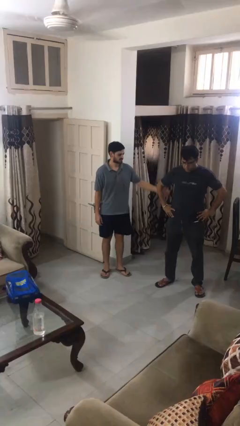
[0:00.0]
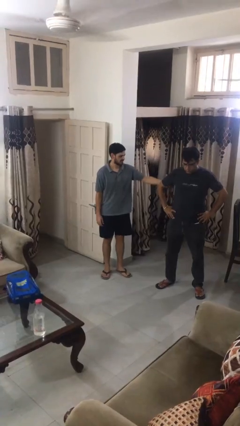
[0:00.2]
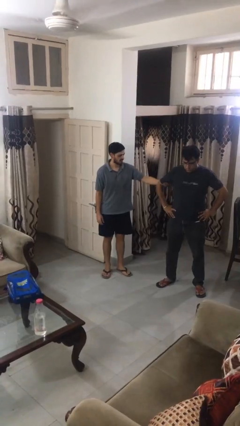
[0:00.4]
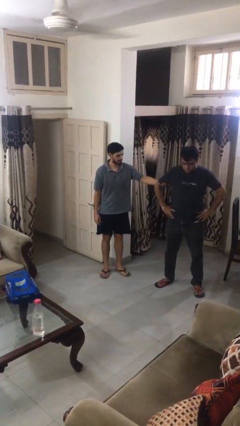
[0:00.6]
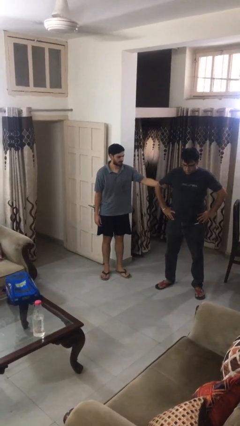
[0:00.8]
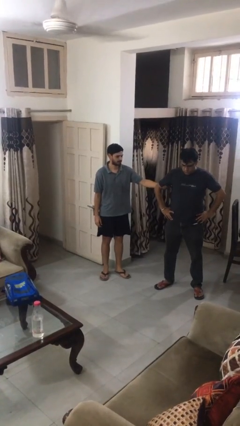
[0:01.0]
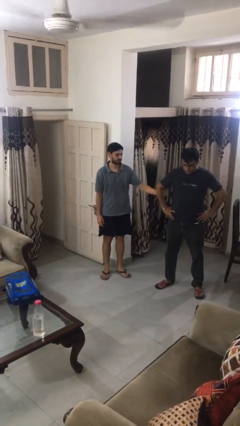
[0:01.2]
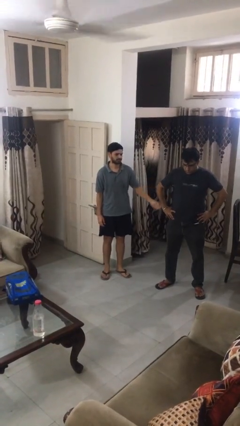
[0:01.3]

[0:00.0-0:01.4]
person grabs person by bicep

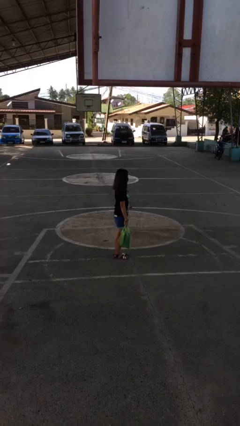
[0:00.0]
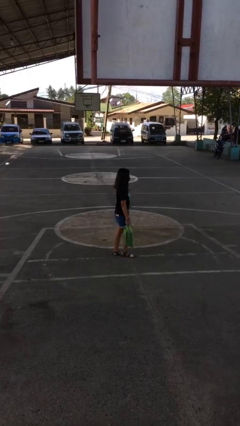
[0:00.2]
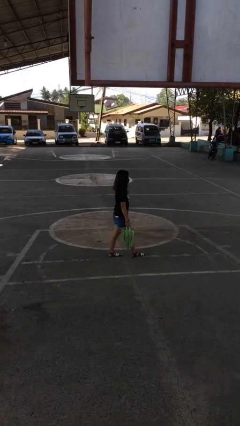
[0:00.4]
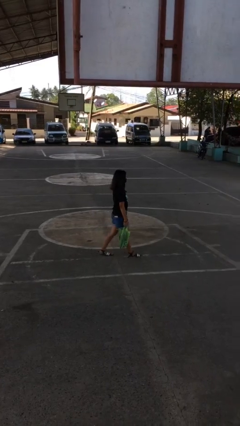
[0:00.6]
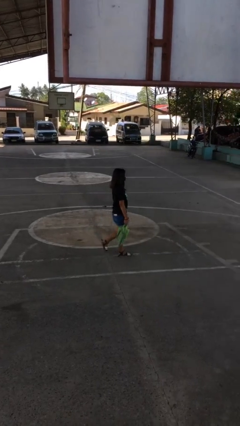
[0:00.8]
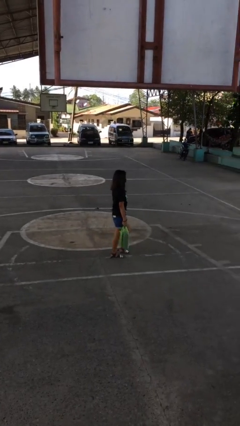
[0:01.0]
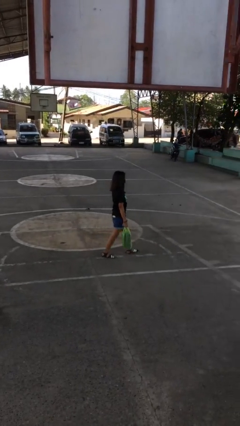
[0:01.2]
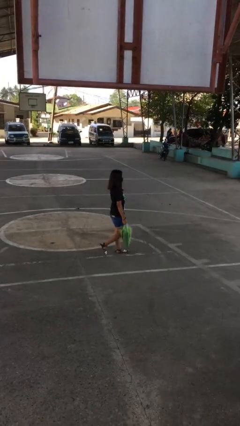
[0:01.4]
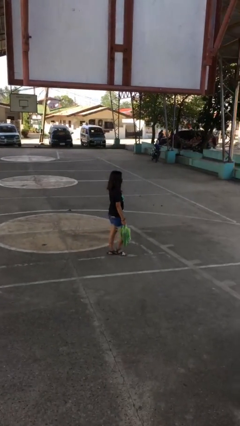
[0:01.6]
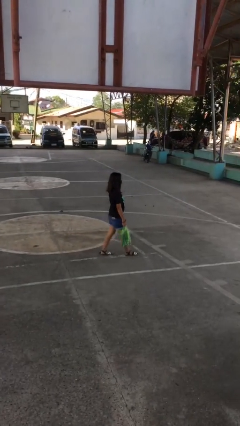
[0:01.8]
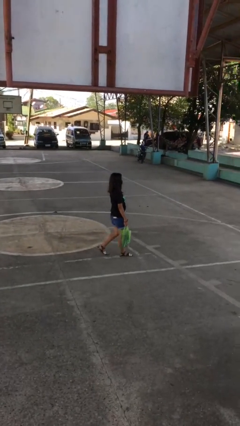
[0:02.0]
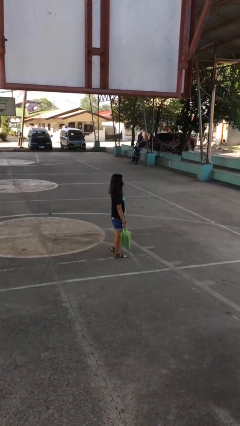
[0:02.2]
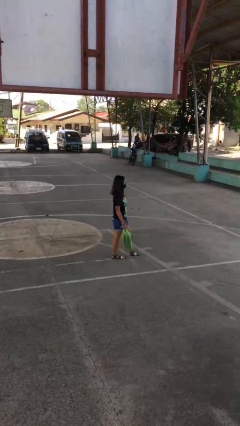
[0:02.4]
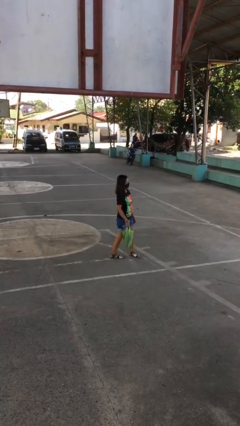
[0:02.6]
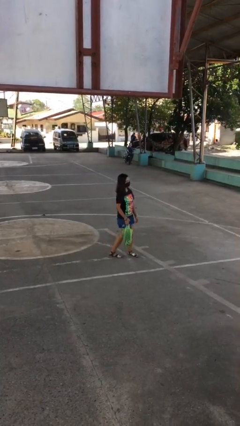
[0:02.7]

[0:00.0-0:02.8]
person carries groceries

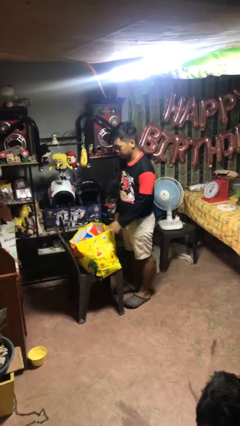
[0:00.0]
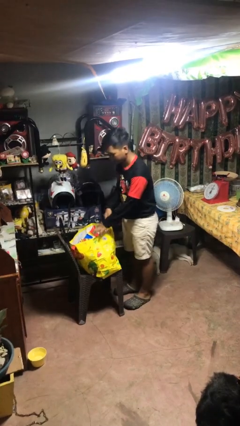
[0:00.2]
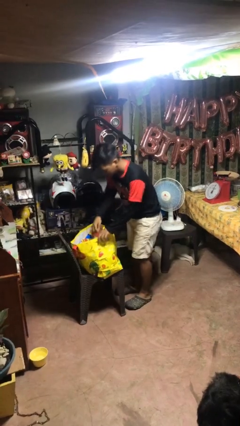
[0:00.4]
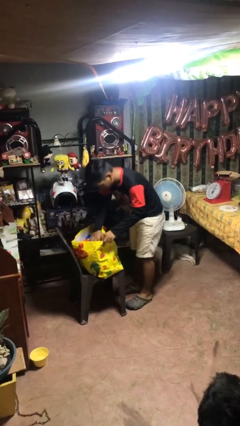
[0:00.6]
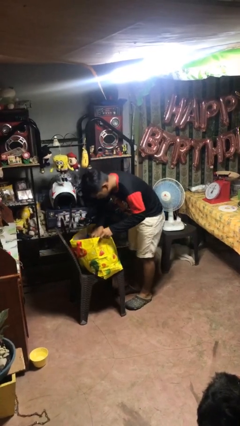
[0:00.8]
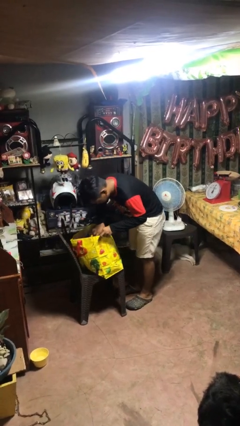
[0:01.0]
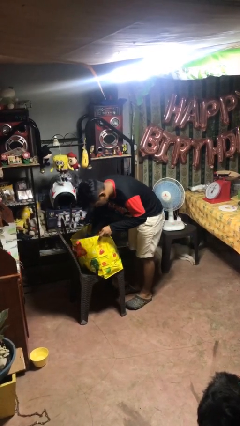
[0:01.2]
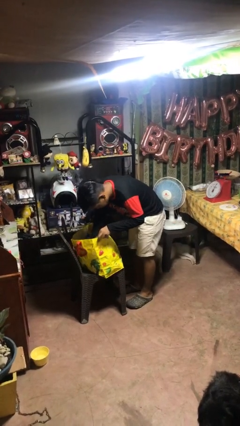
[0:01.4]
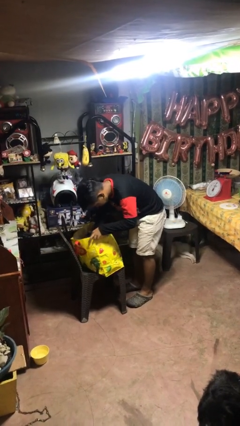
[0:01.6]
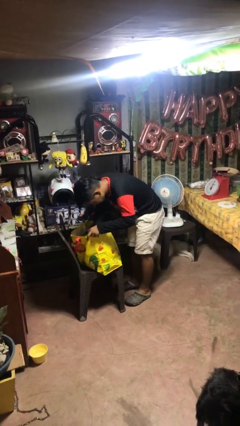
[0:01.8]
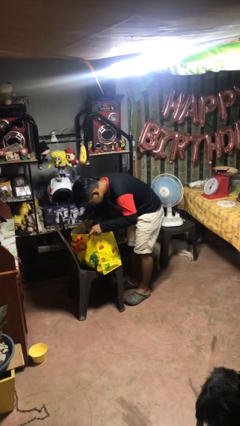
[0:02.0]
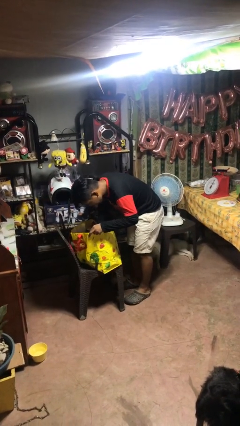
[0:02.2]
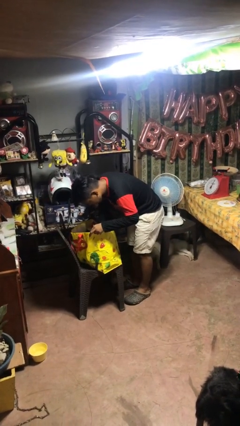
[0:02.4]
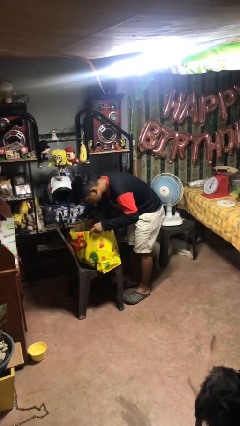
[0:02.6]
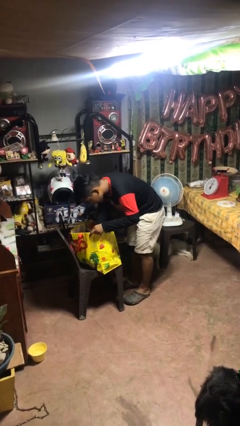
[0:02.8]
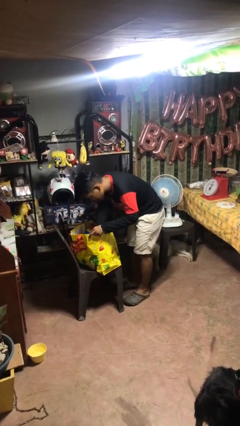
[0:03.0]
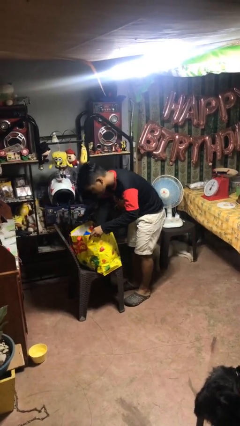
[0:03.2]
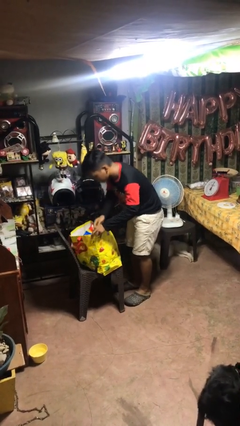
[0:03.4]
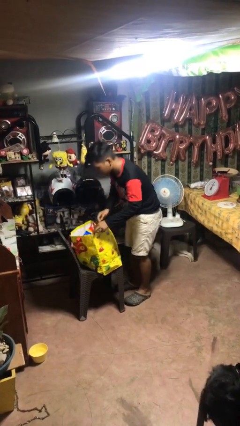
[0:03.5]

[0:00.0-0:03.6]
person searches in bag

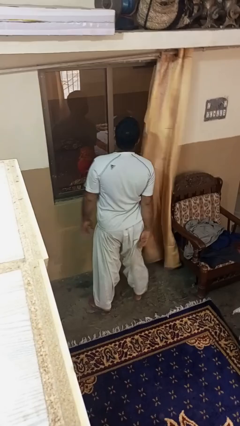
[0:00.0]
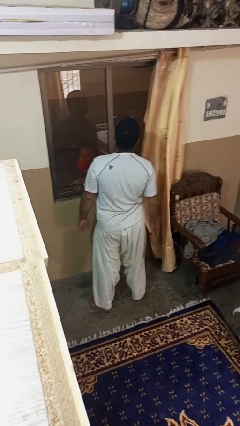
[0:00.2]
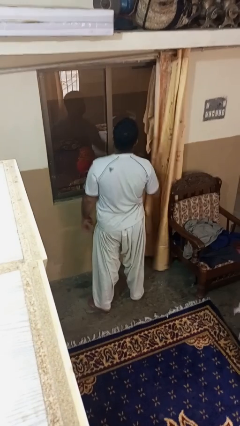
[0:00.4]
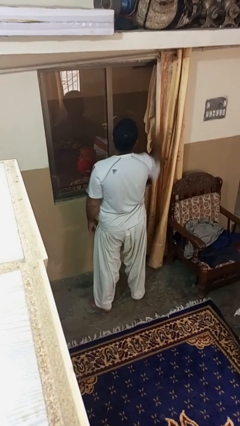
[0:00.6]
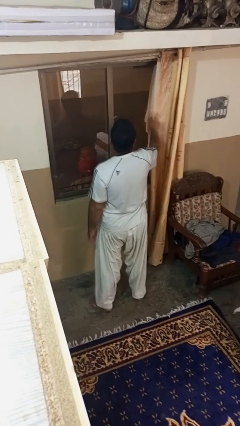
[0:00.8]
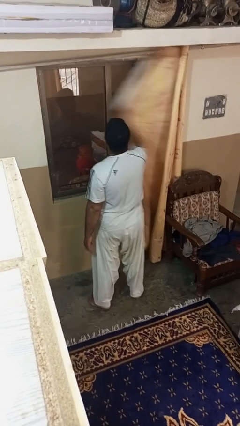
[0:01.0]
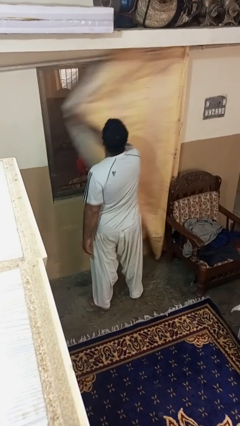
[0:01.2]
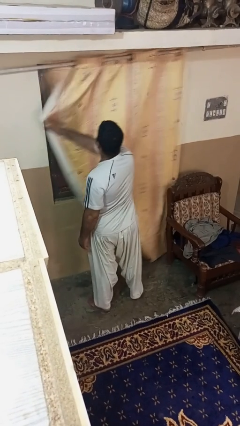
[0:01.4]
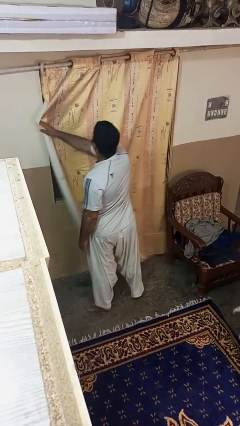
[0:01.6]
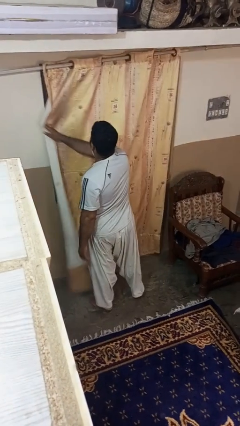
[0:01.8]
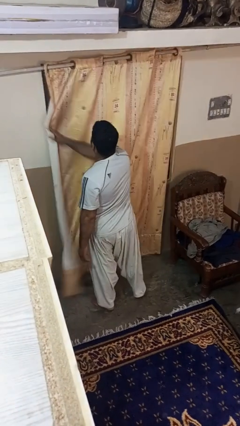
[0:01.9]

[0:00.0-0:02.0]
person closes curtains

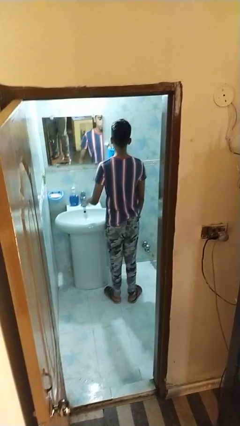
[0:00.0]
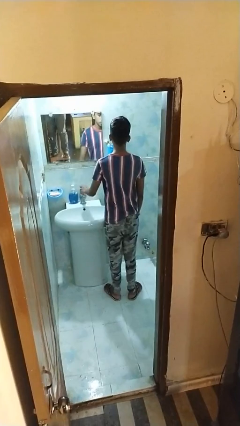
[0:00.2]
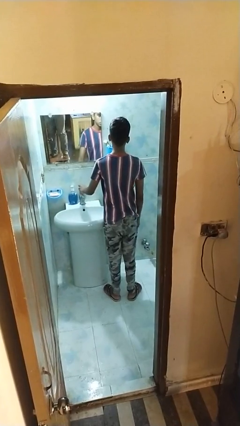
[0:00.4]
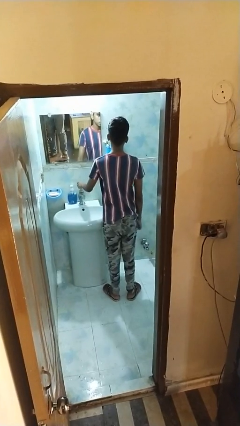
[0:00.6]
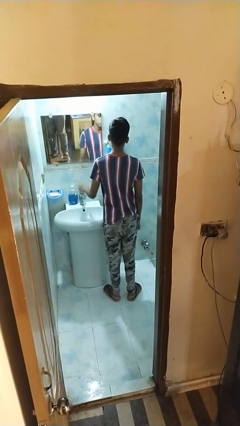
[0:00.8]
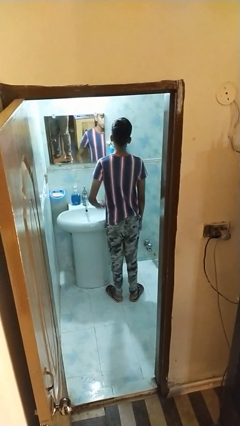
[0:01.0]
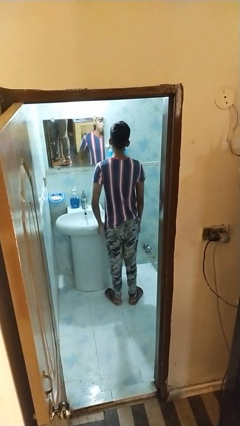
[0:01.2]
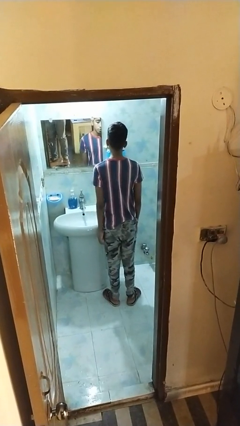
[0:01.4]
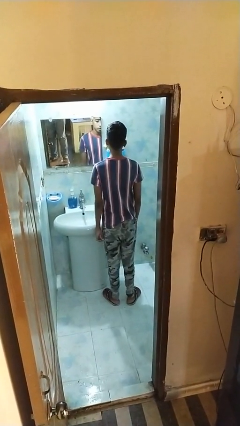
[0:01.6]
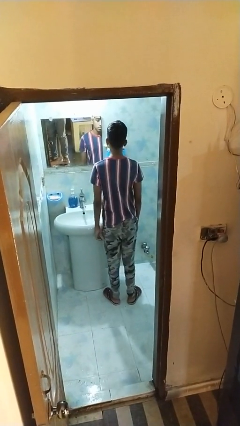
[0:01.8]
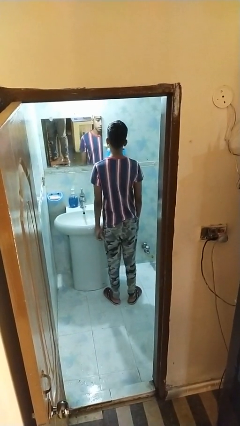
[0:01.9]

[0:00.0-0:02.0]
person turns on faucet

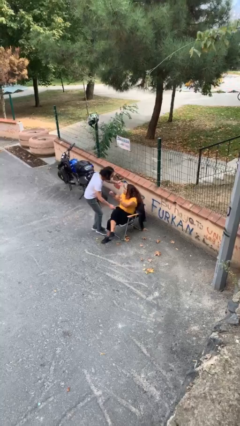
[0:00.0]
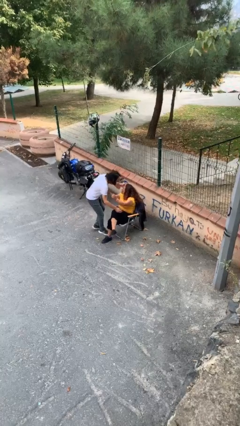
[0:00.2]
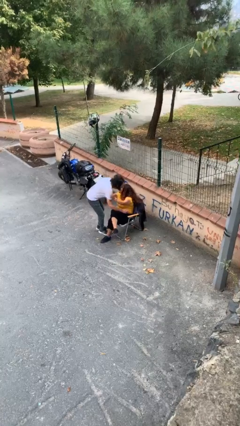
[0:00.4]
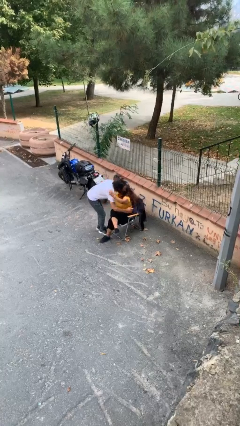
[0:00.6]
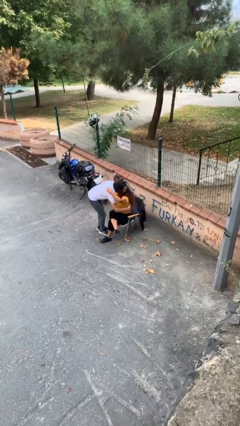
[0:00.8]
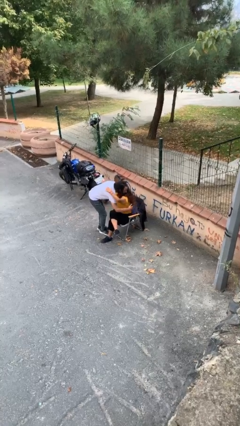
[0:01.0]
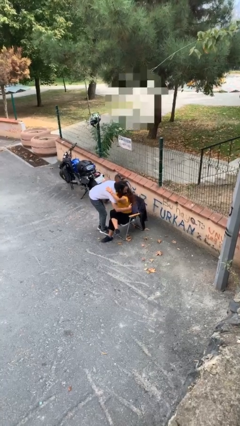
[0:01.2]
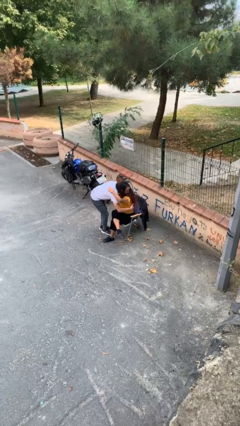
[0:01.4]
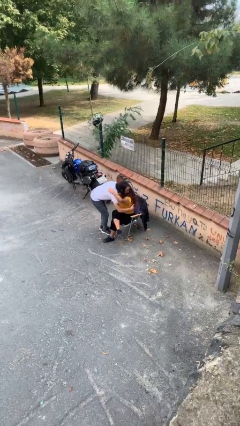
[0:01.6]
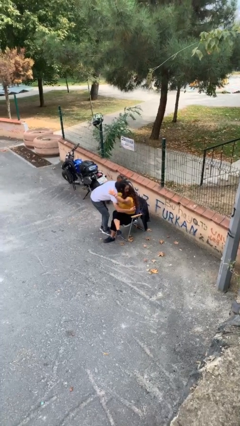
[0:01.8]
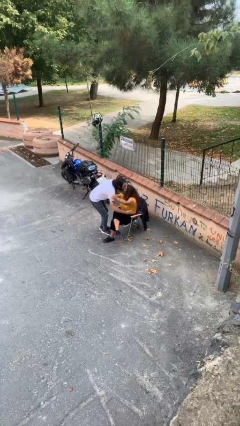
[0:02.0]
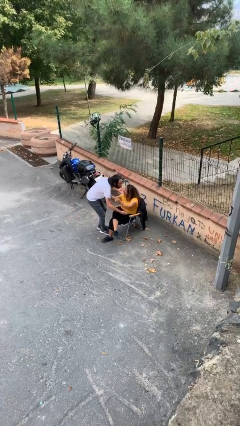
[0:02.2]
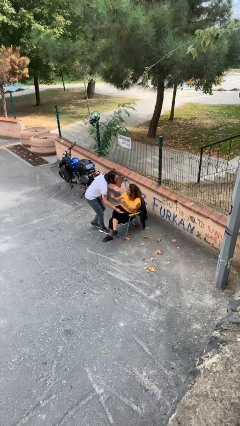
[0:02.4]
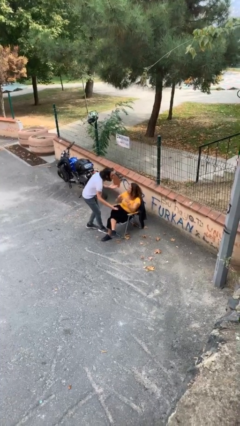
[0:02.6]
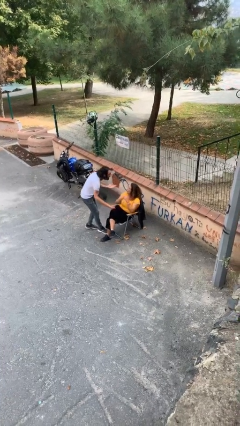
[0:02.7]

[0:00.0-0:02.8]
person embraces person

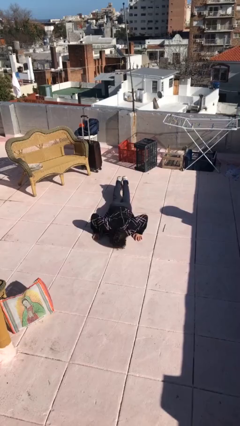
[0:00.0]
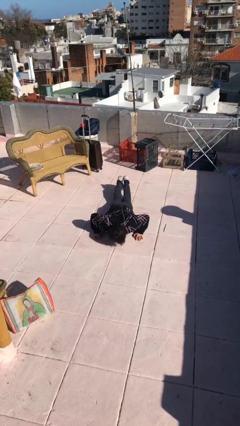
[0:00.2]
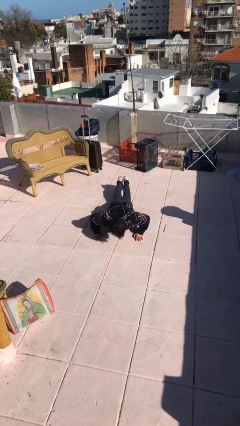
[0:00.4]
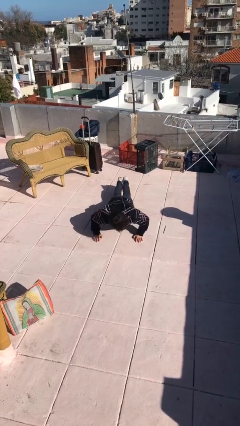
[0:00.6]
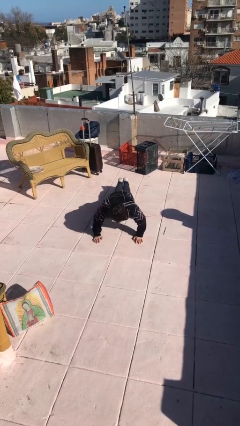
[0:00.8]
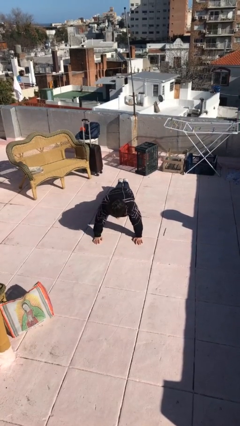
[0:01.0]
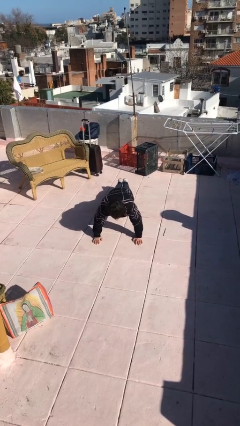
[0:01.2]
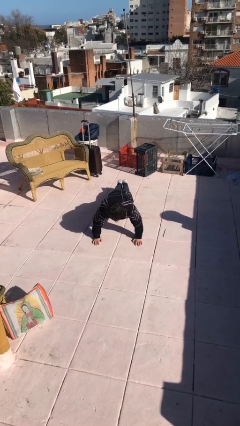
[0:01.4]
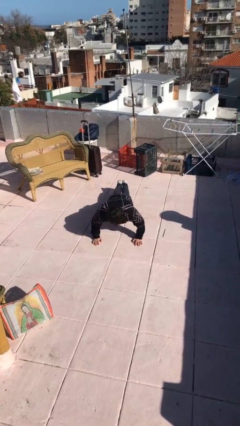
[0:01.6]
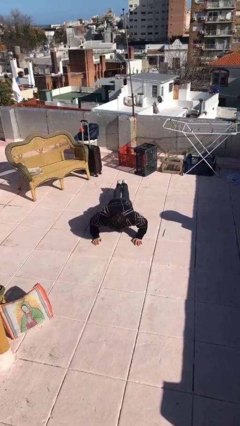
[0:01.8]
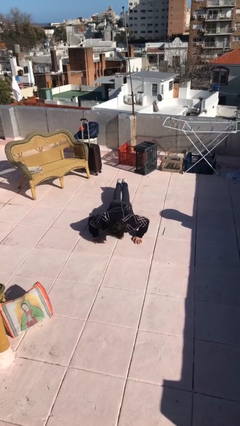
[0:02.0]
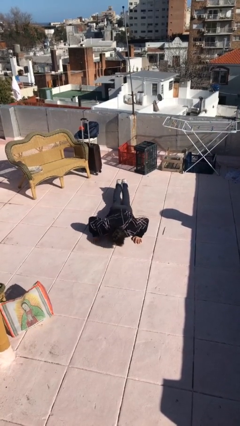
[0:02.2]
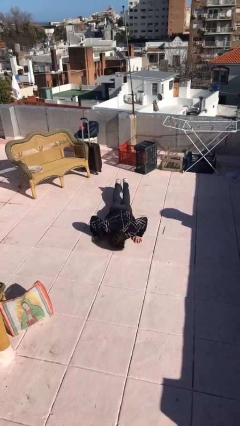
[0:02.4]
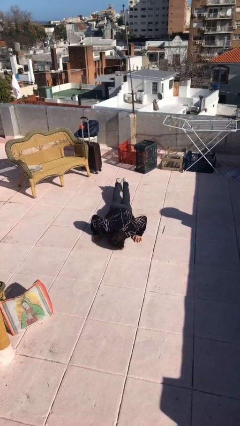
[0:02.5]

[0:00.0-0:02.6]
person exercises with pushup
